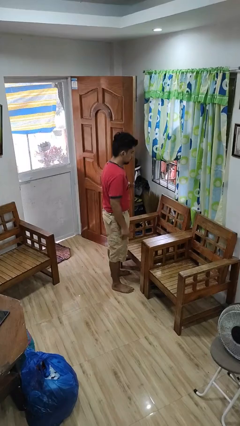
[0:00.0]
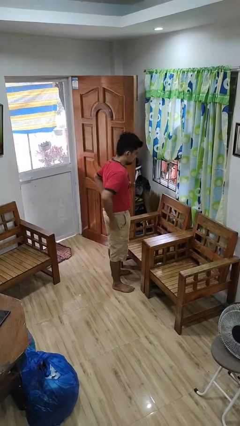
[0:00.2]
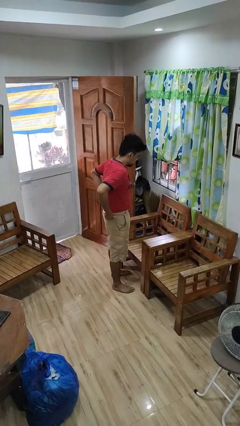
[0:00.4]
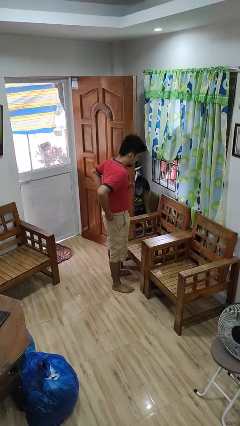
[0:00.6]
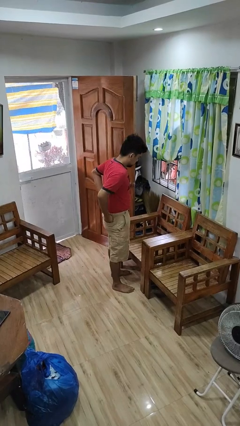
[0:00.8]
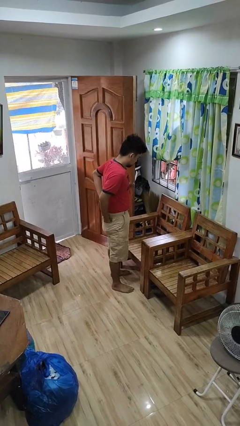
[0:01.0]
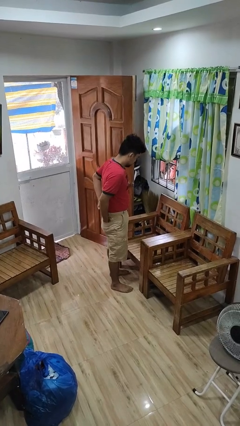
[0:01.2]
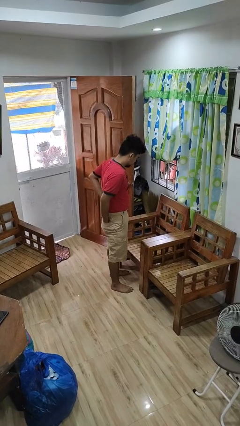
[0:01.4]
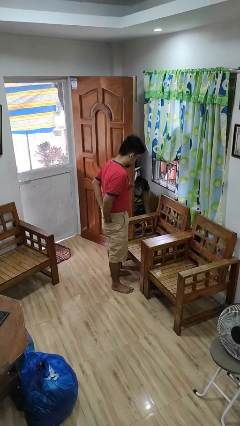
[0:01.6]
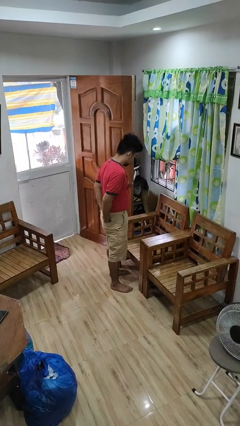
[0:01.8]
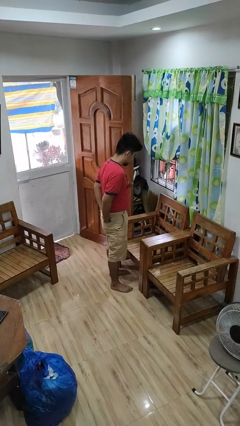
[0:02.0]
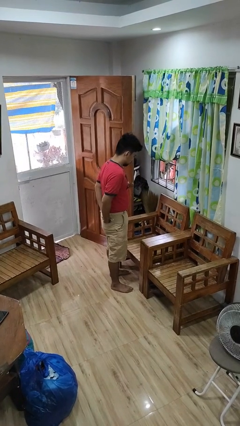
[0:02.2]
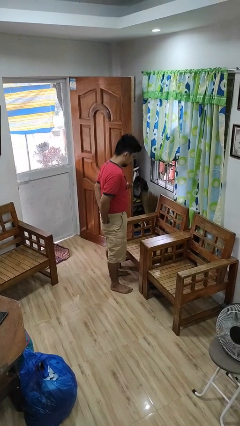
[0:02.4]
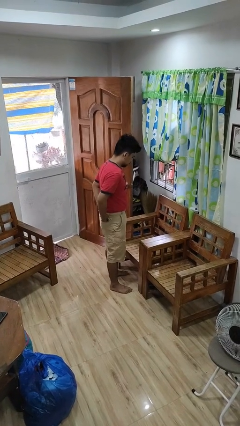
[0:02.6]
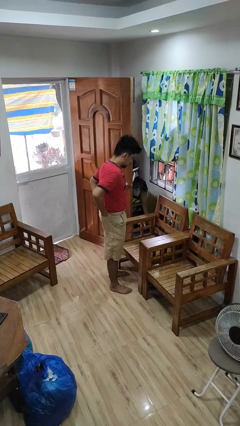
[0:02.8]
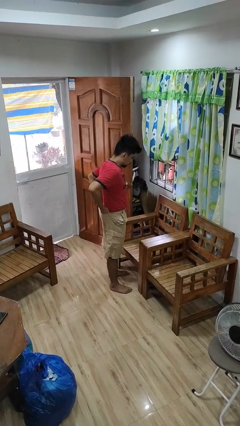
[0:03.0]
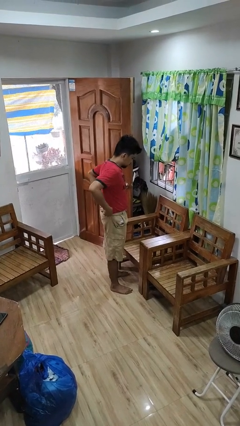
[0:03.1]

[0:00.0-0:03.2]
person puts hands in back pockets

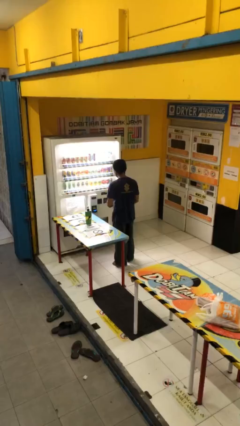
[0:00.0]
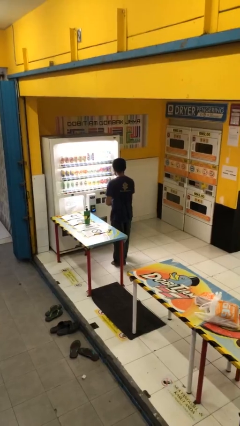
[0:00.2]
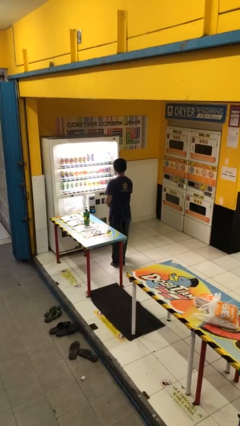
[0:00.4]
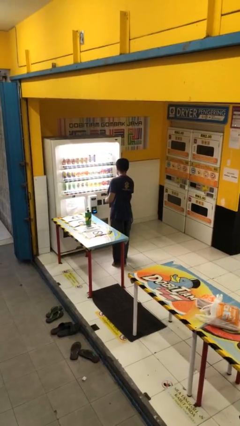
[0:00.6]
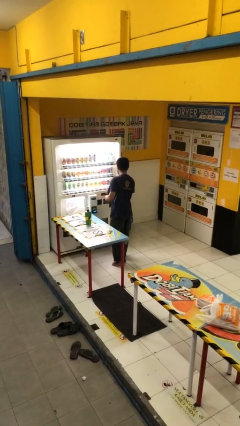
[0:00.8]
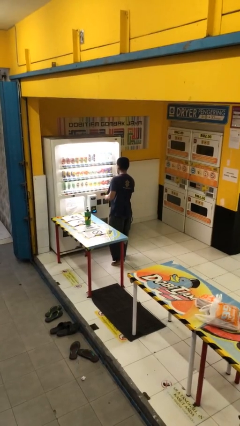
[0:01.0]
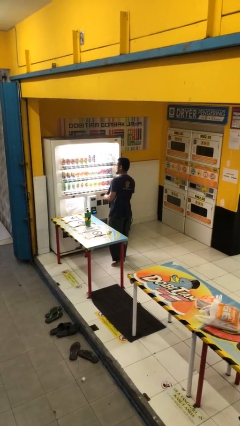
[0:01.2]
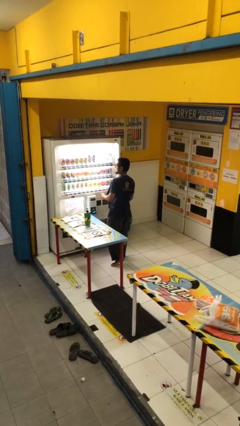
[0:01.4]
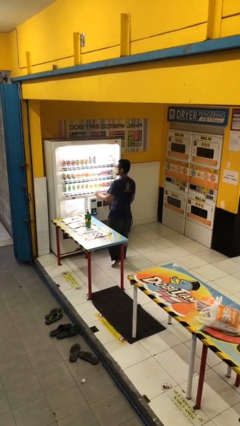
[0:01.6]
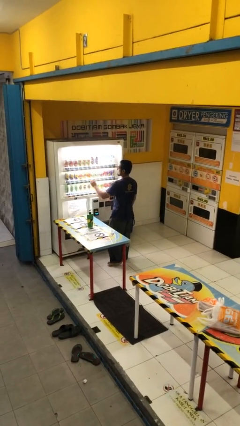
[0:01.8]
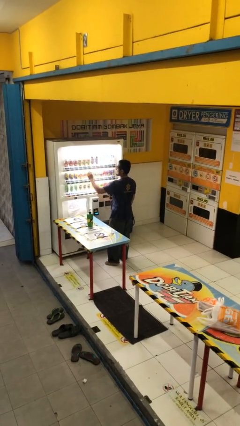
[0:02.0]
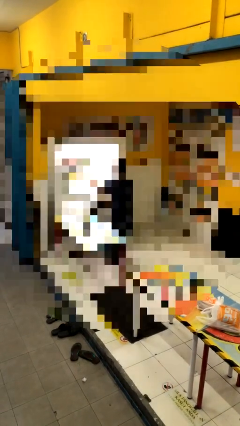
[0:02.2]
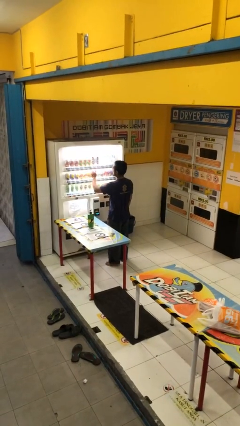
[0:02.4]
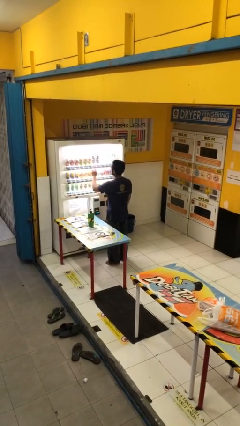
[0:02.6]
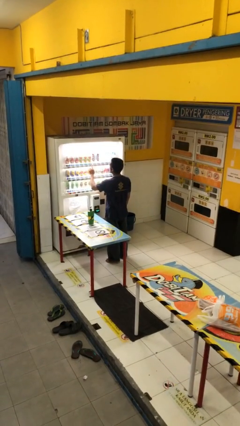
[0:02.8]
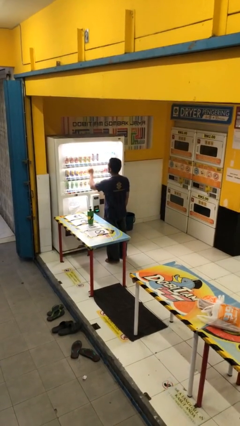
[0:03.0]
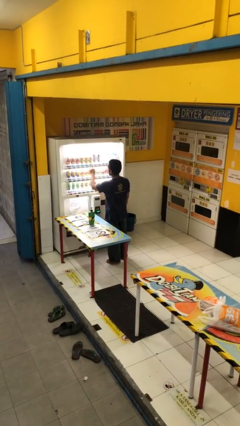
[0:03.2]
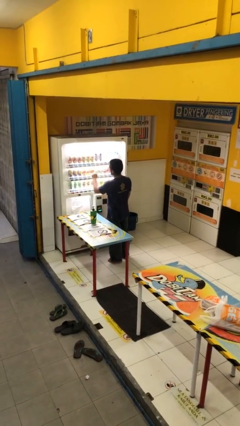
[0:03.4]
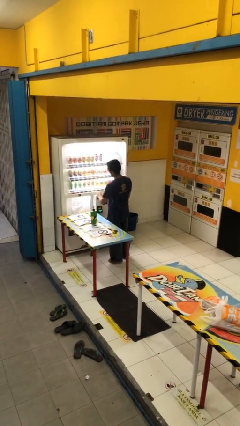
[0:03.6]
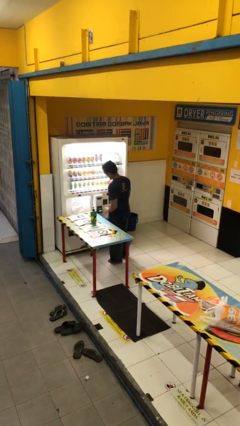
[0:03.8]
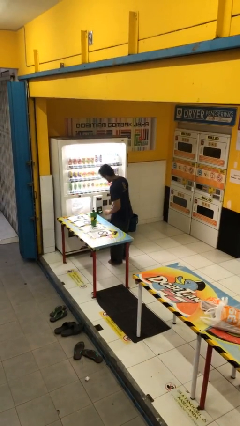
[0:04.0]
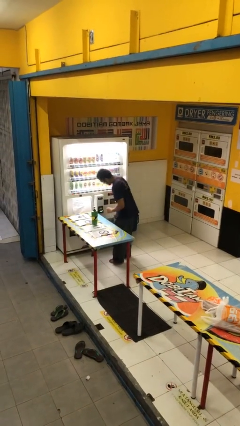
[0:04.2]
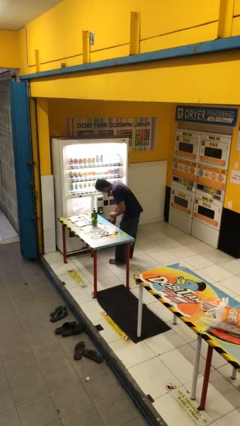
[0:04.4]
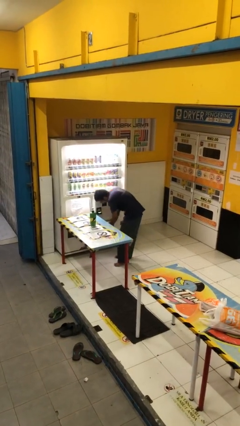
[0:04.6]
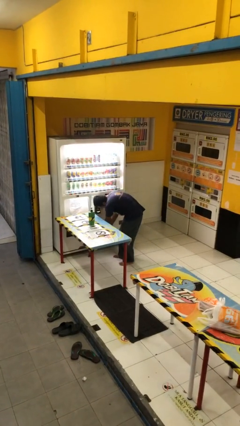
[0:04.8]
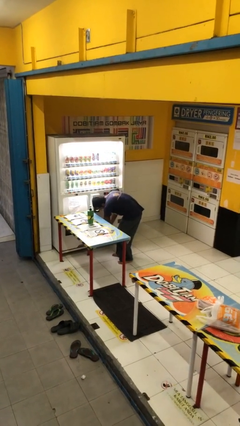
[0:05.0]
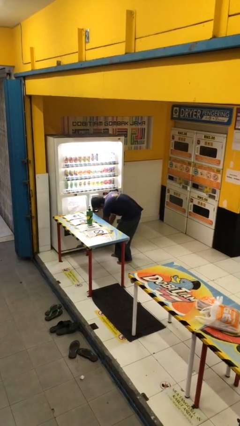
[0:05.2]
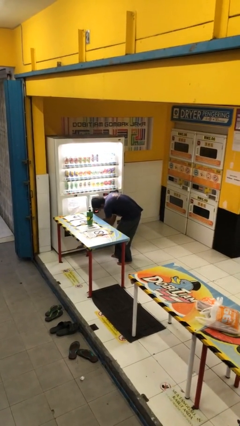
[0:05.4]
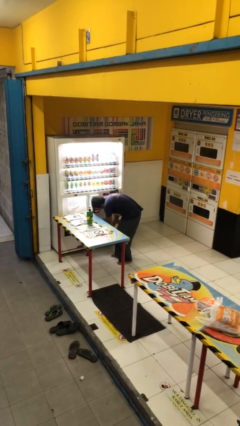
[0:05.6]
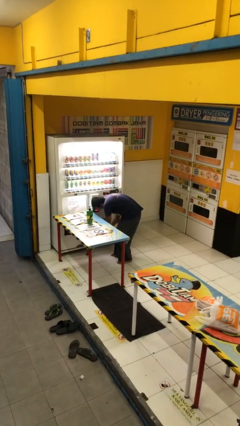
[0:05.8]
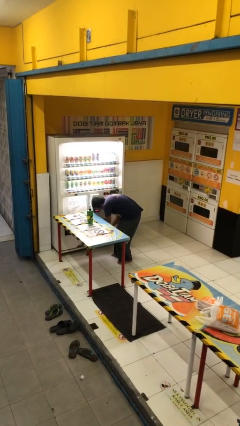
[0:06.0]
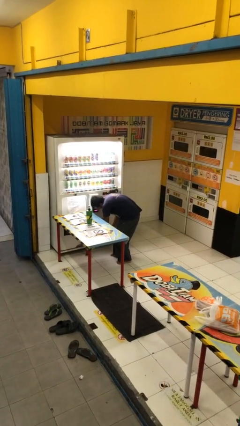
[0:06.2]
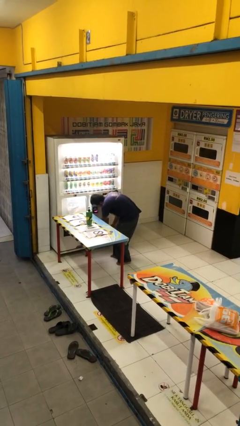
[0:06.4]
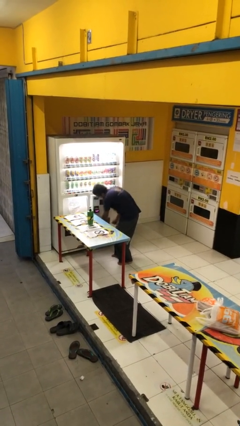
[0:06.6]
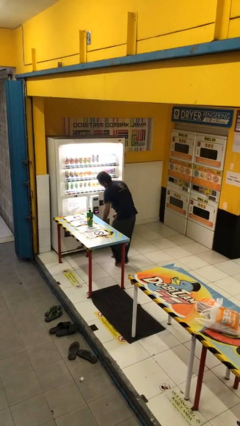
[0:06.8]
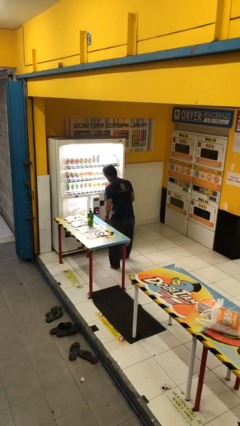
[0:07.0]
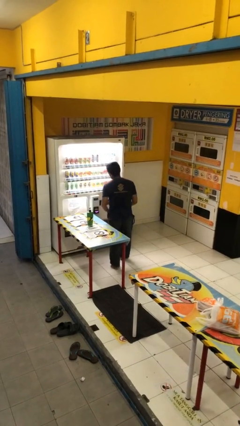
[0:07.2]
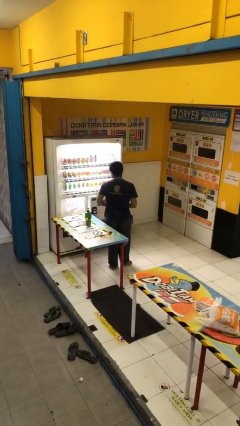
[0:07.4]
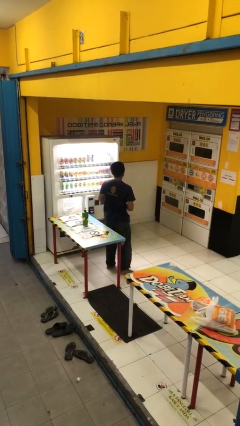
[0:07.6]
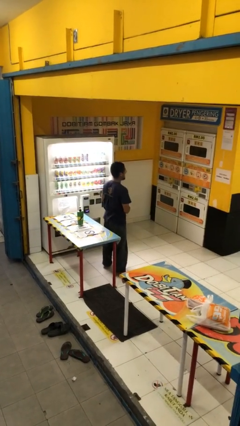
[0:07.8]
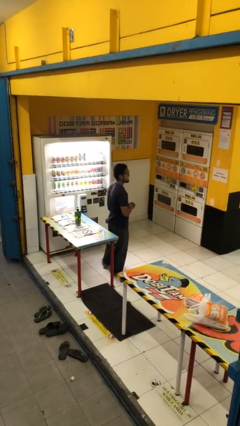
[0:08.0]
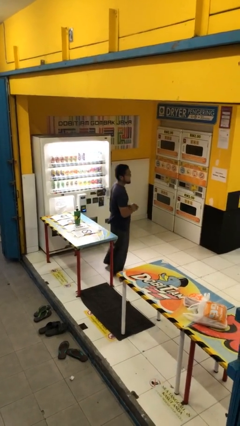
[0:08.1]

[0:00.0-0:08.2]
person purchases from machine

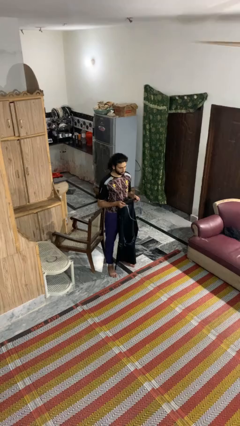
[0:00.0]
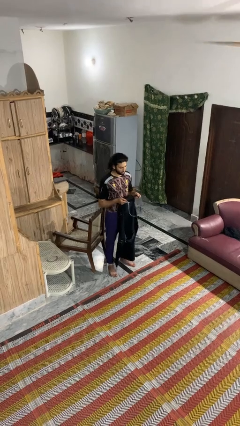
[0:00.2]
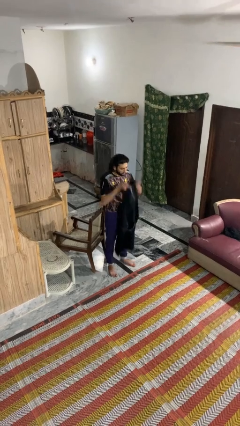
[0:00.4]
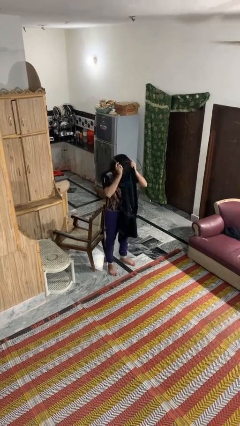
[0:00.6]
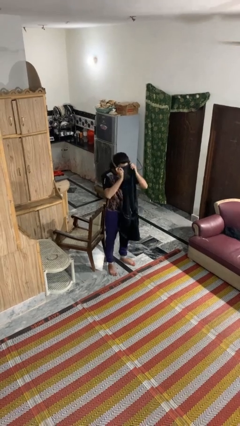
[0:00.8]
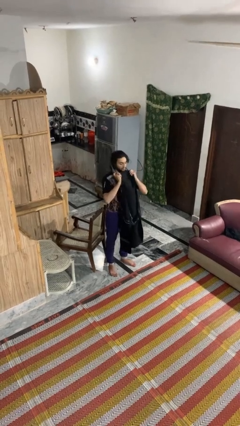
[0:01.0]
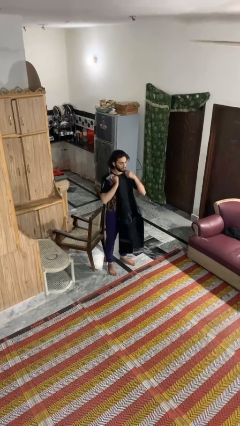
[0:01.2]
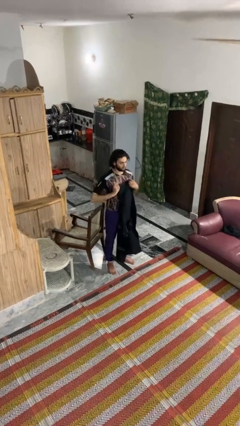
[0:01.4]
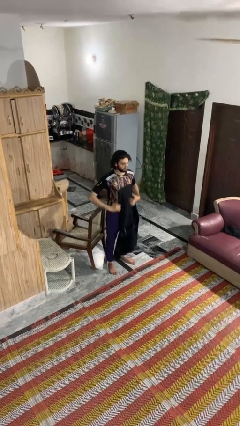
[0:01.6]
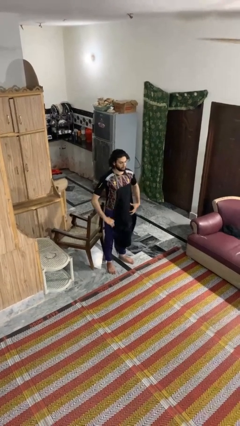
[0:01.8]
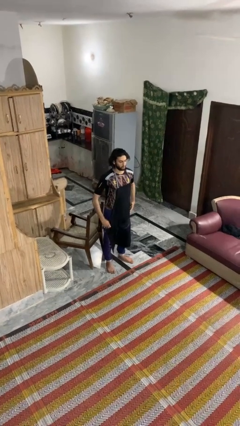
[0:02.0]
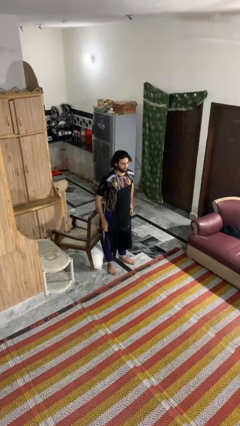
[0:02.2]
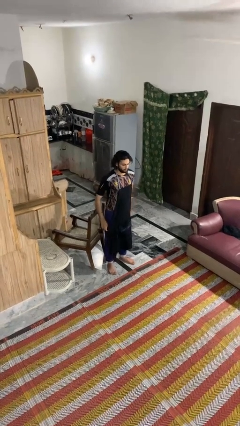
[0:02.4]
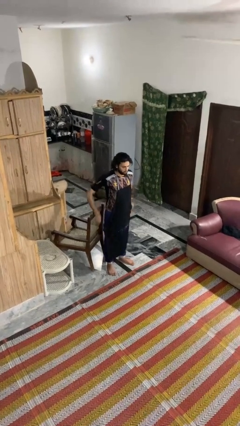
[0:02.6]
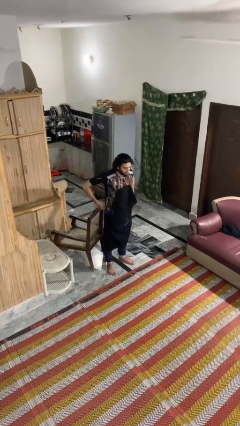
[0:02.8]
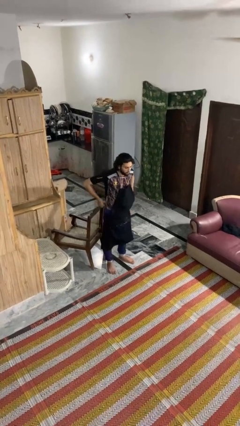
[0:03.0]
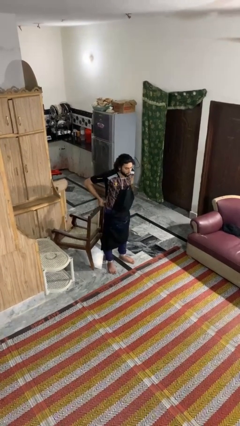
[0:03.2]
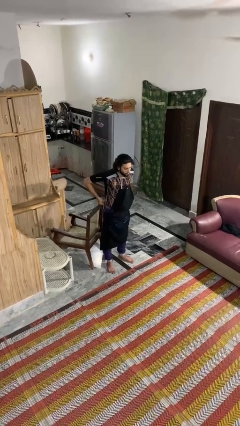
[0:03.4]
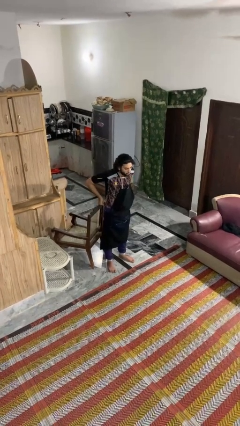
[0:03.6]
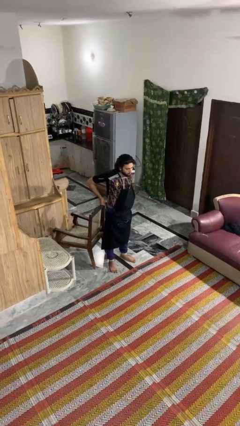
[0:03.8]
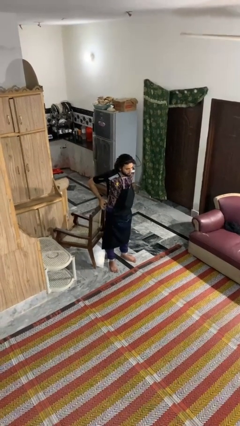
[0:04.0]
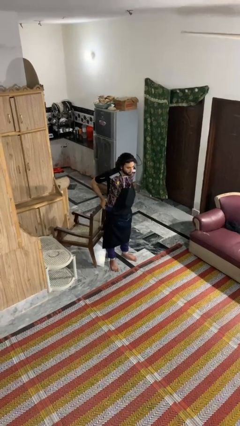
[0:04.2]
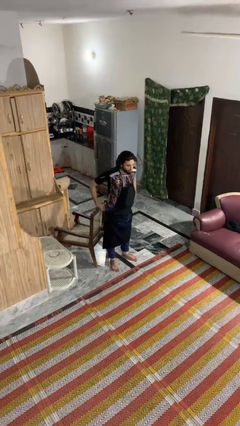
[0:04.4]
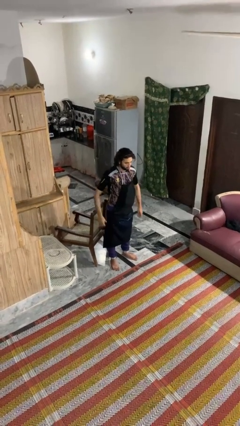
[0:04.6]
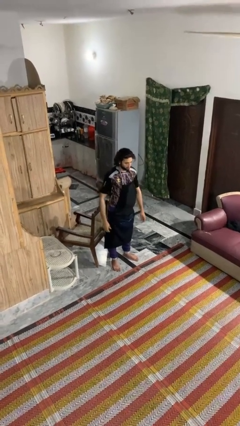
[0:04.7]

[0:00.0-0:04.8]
person puts on apron

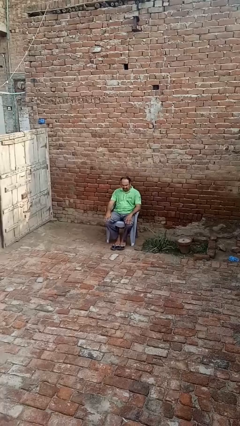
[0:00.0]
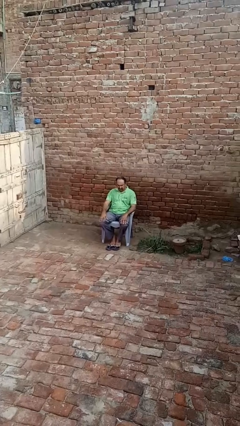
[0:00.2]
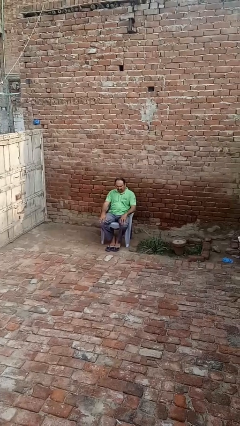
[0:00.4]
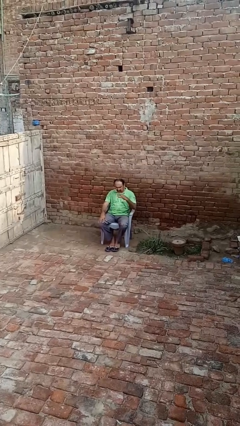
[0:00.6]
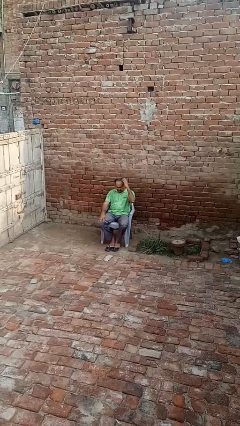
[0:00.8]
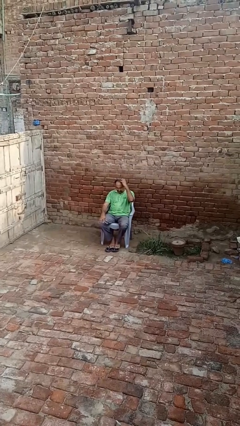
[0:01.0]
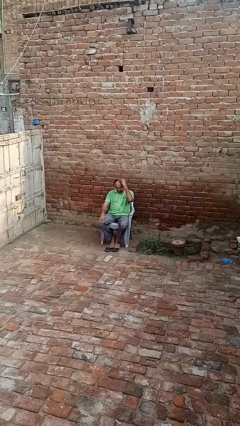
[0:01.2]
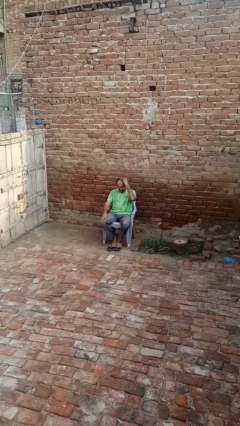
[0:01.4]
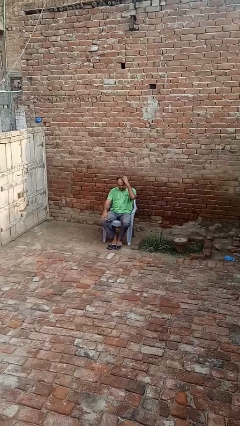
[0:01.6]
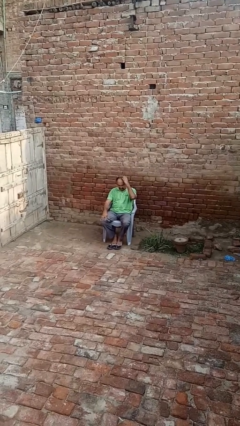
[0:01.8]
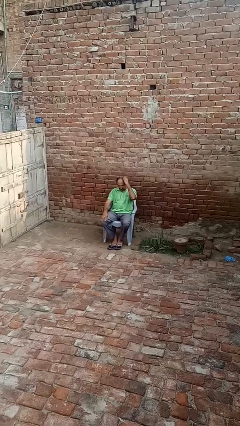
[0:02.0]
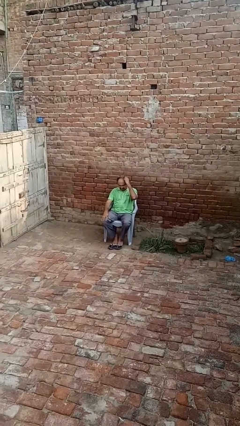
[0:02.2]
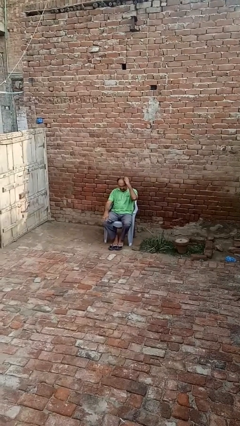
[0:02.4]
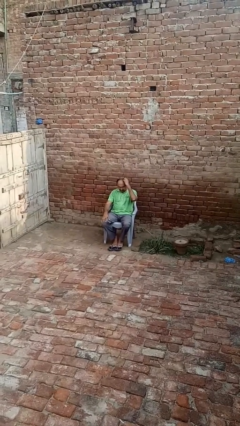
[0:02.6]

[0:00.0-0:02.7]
person scratches face
